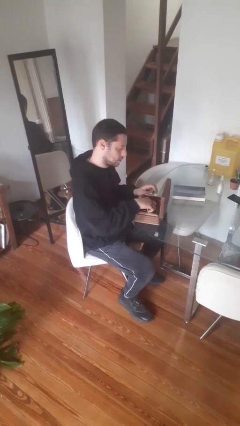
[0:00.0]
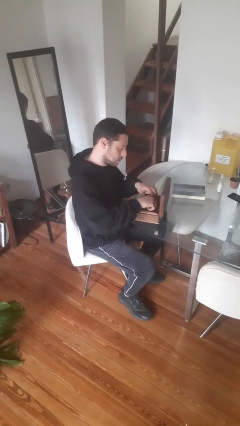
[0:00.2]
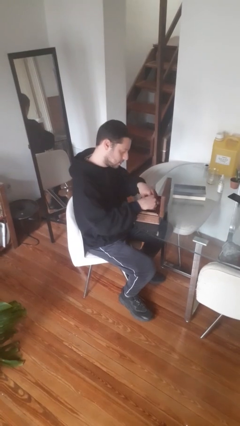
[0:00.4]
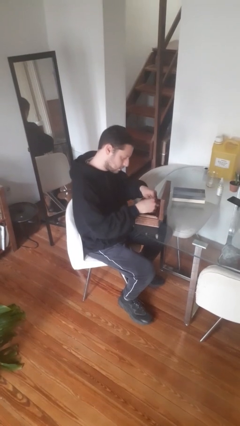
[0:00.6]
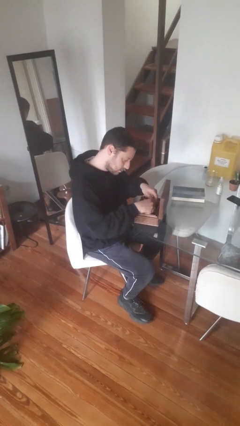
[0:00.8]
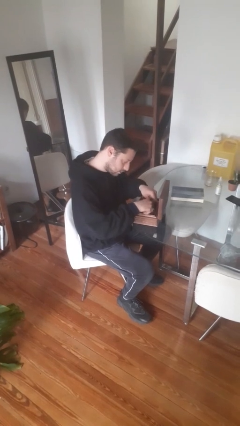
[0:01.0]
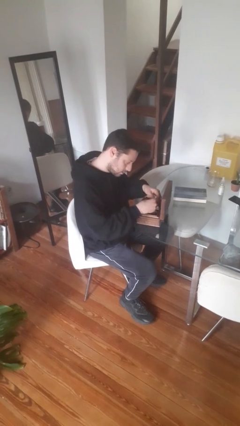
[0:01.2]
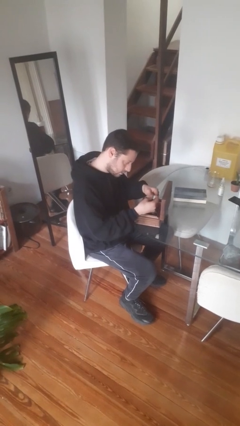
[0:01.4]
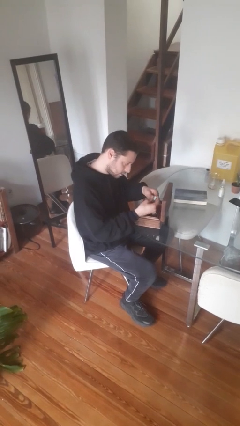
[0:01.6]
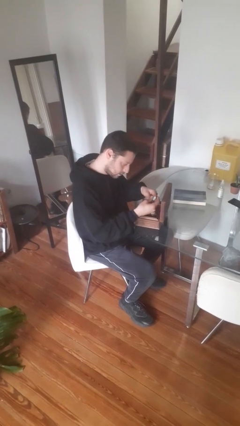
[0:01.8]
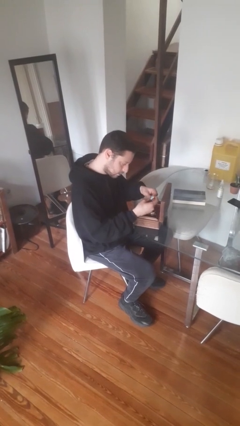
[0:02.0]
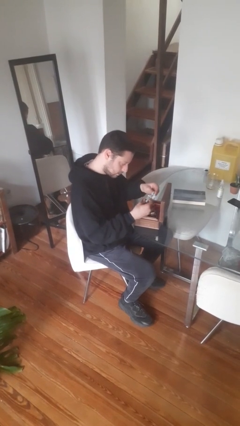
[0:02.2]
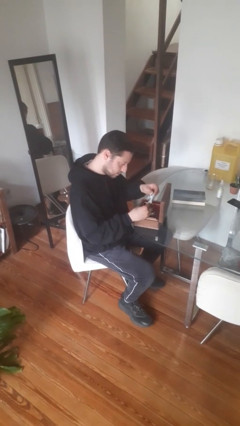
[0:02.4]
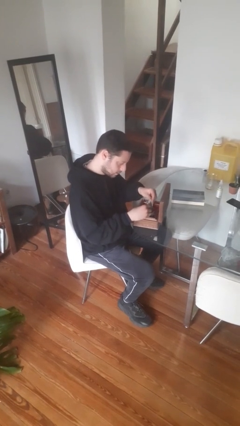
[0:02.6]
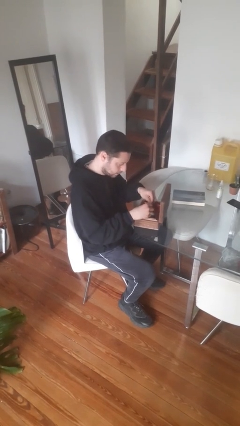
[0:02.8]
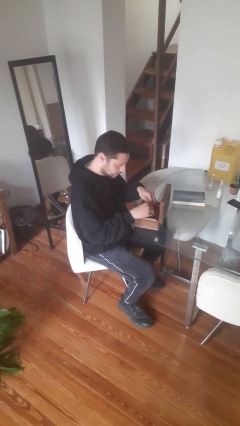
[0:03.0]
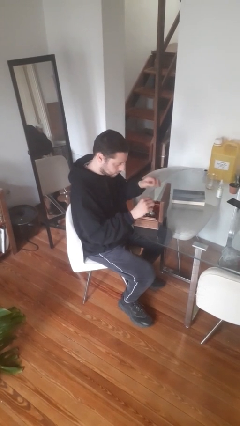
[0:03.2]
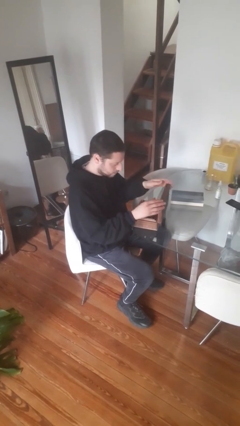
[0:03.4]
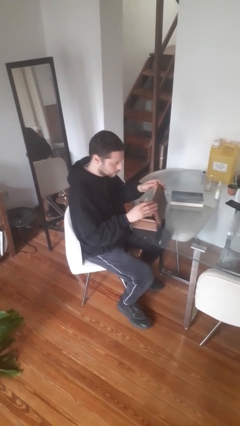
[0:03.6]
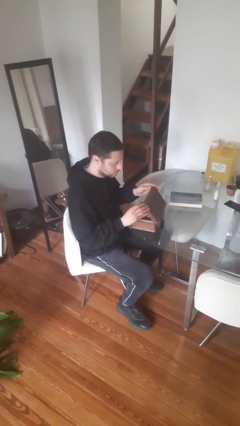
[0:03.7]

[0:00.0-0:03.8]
person searches jewelry box

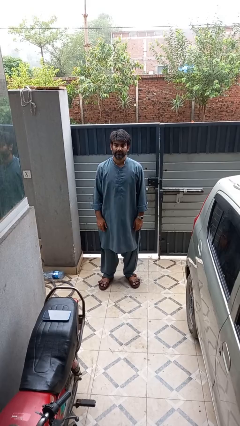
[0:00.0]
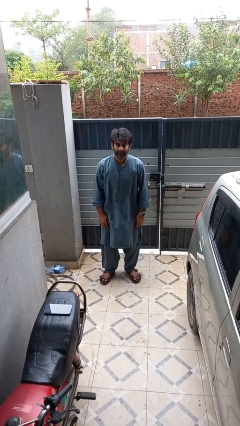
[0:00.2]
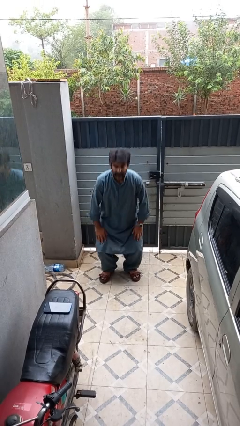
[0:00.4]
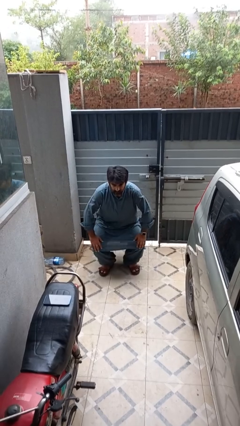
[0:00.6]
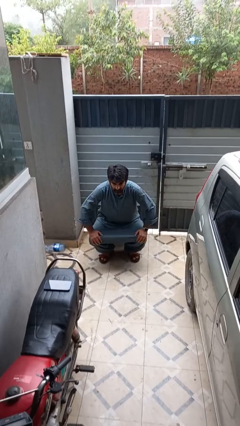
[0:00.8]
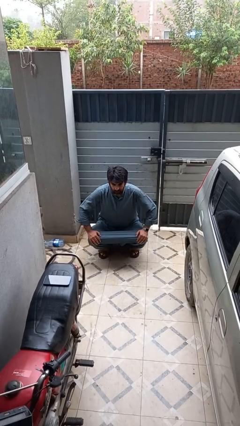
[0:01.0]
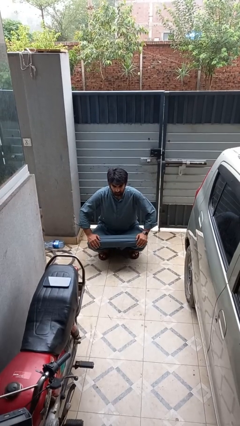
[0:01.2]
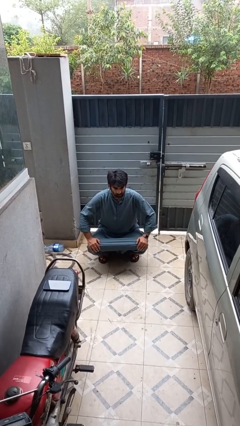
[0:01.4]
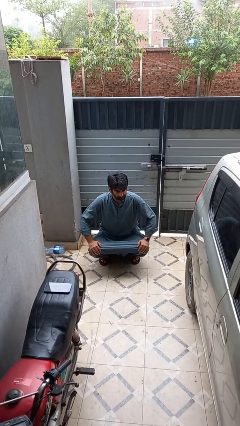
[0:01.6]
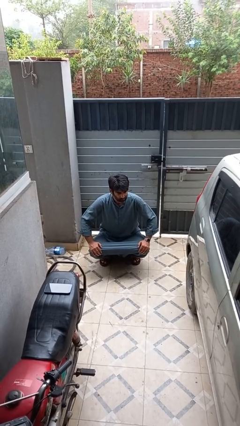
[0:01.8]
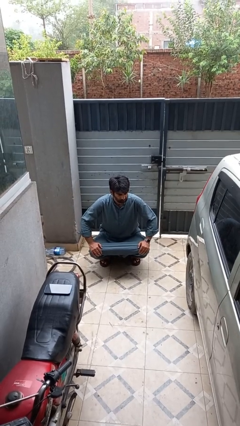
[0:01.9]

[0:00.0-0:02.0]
person squats

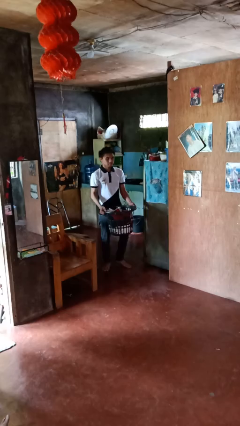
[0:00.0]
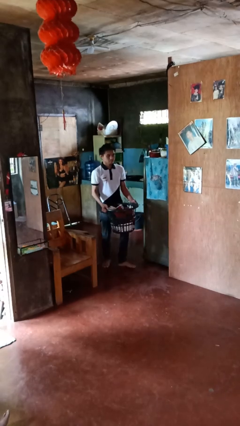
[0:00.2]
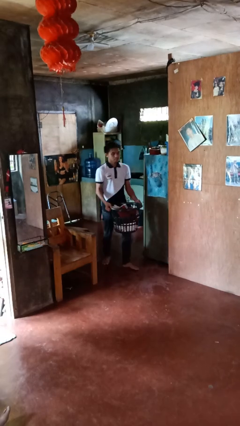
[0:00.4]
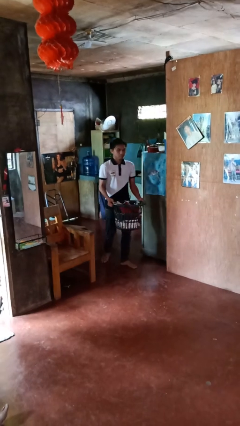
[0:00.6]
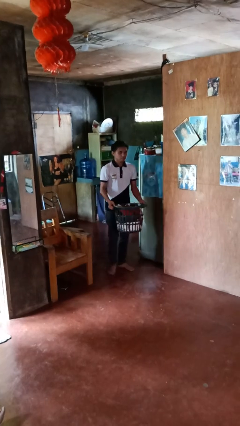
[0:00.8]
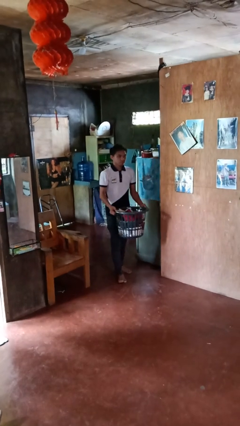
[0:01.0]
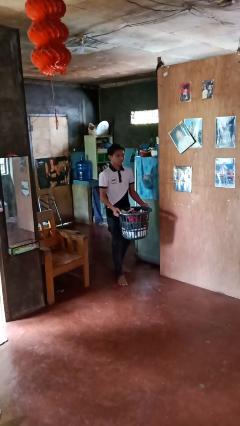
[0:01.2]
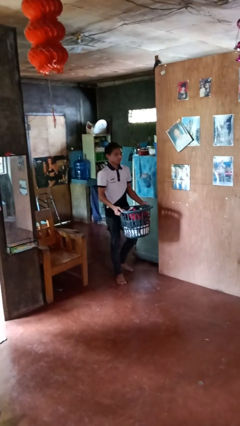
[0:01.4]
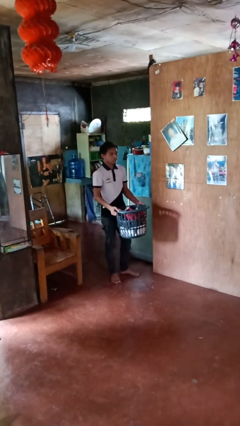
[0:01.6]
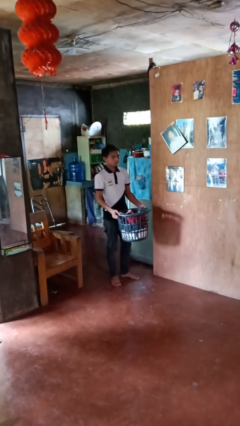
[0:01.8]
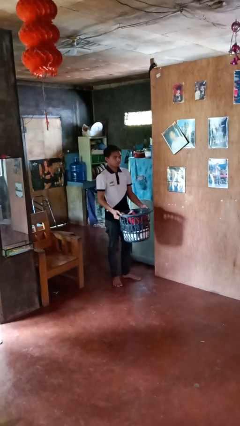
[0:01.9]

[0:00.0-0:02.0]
person carries laundry basket

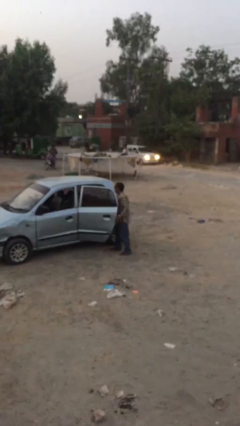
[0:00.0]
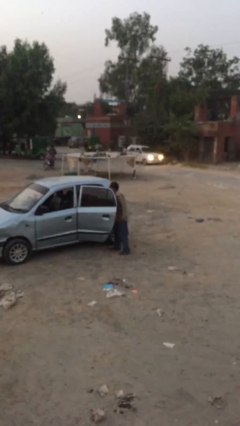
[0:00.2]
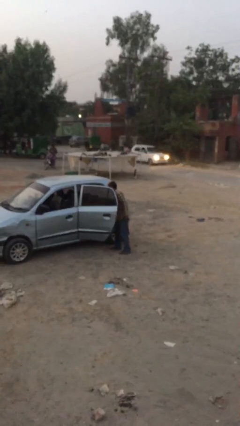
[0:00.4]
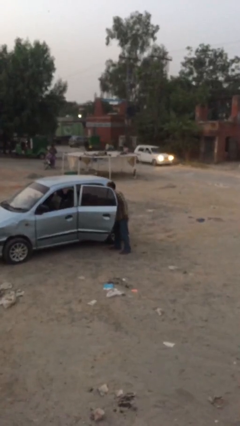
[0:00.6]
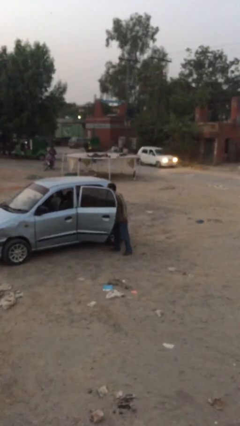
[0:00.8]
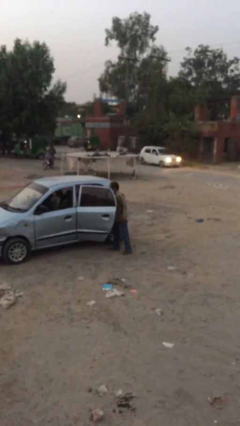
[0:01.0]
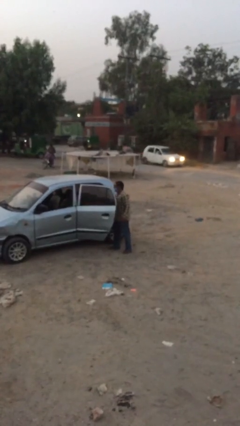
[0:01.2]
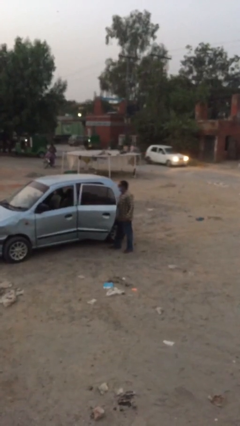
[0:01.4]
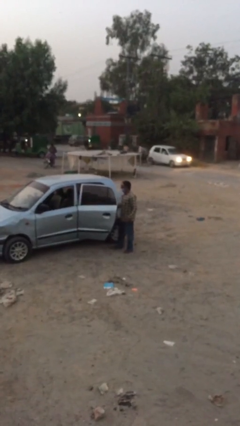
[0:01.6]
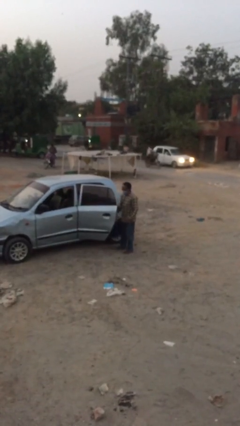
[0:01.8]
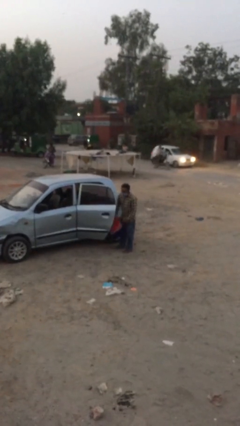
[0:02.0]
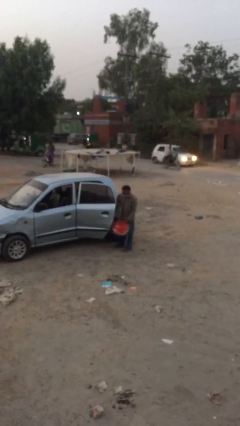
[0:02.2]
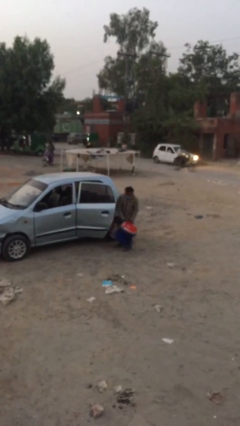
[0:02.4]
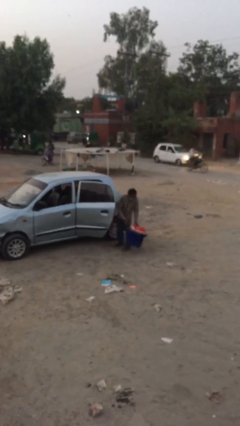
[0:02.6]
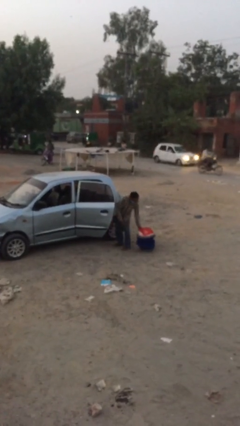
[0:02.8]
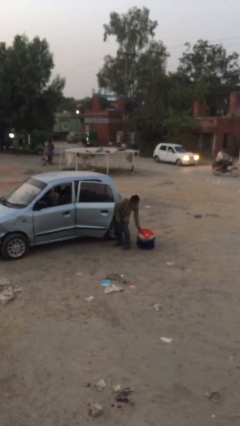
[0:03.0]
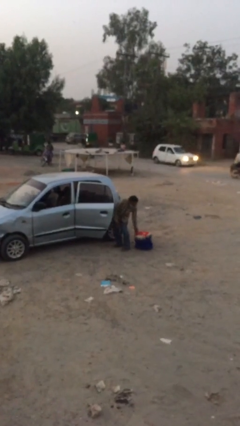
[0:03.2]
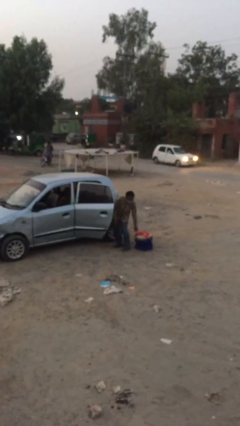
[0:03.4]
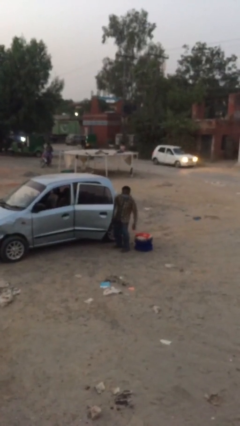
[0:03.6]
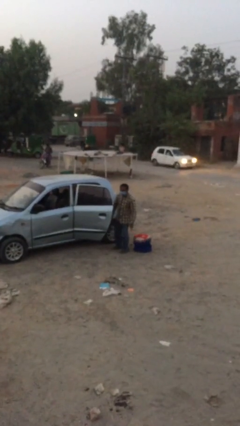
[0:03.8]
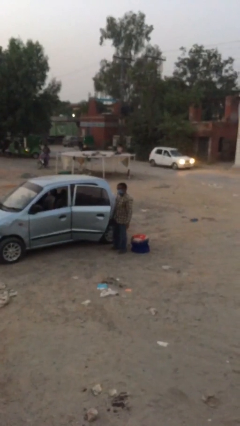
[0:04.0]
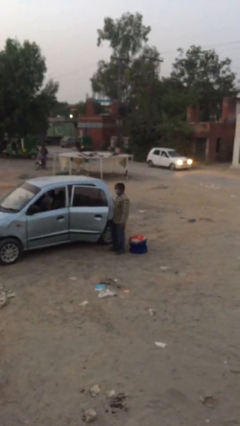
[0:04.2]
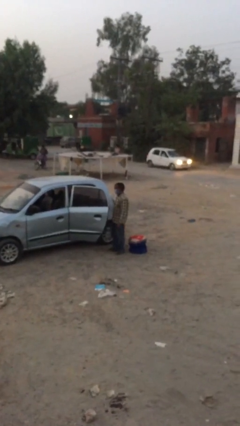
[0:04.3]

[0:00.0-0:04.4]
person unloads car

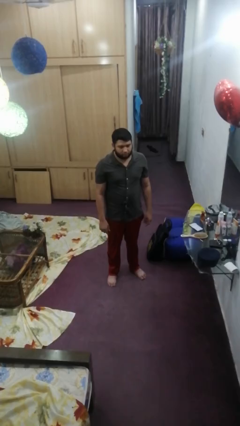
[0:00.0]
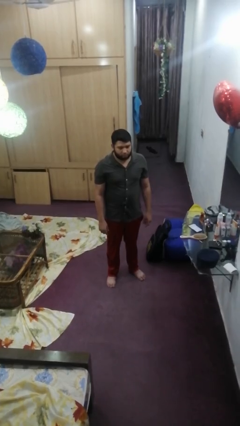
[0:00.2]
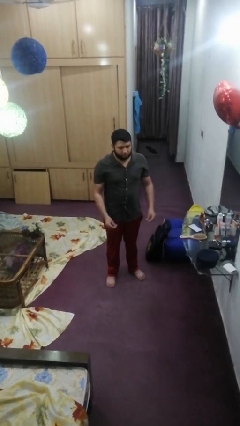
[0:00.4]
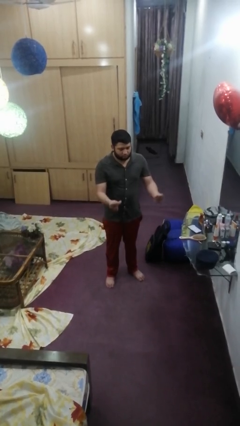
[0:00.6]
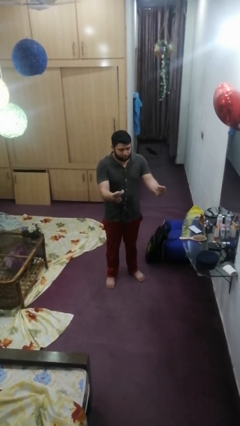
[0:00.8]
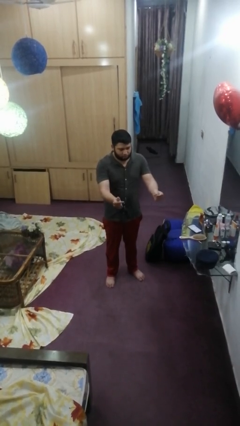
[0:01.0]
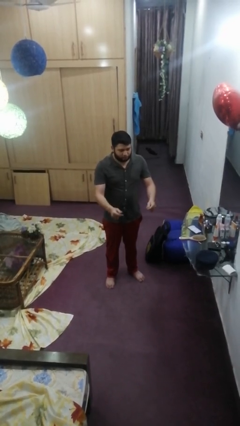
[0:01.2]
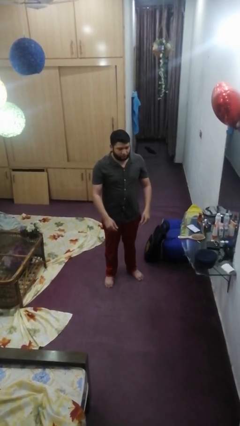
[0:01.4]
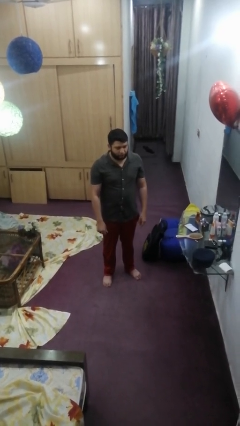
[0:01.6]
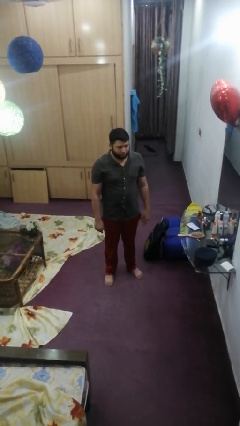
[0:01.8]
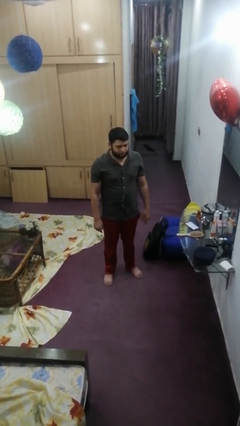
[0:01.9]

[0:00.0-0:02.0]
person snaps fingers

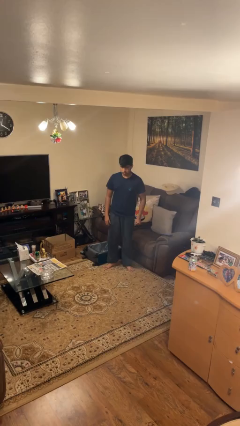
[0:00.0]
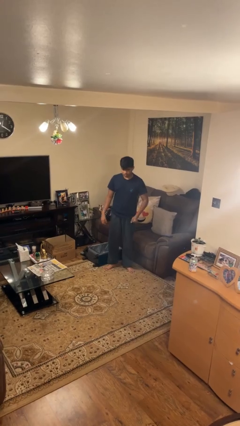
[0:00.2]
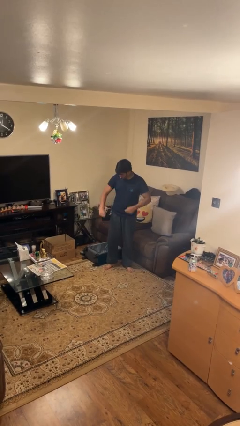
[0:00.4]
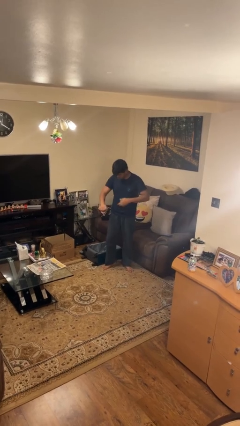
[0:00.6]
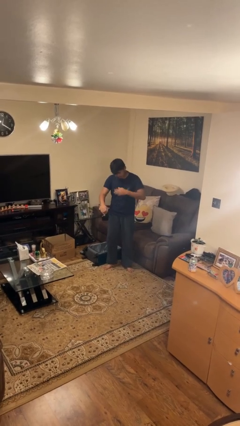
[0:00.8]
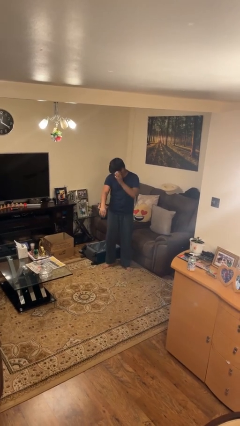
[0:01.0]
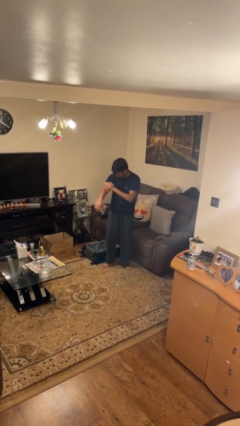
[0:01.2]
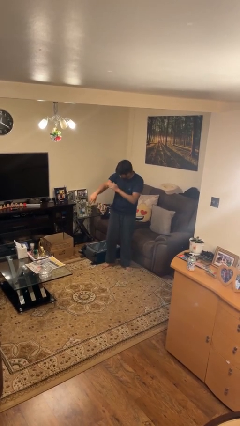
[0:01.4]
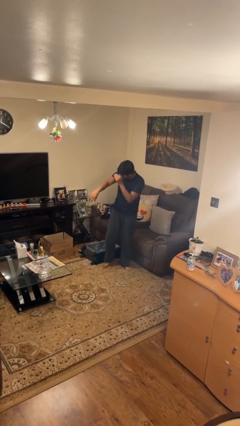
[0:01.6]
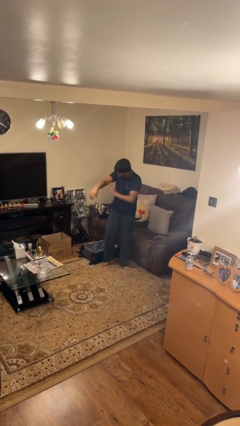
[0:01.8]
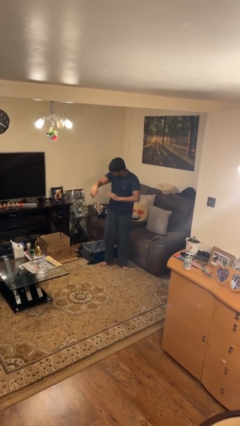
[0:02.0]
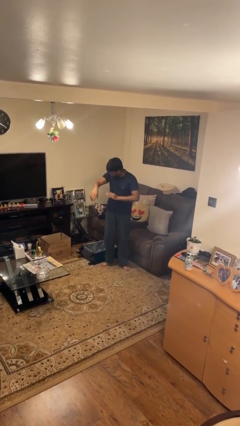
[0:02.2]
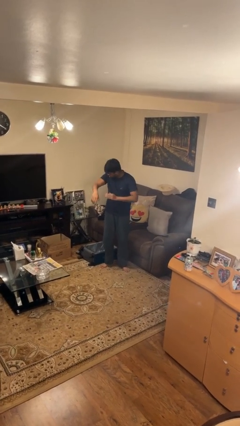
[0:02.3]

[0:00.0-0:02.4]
person swats bug

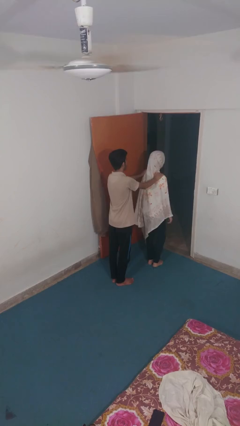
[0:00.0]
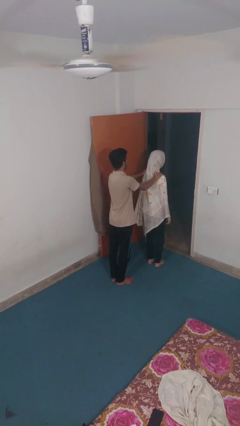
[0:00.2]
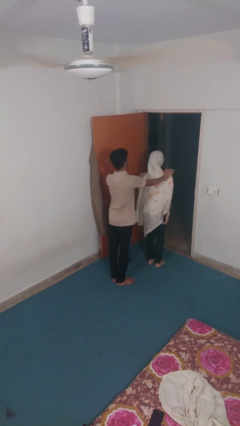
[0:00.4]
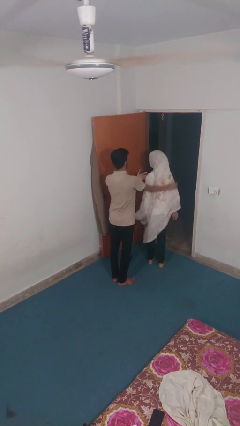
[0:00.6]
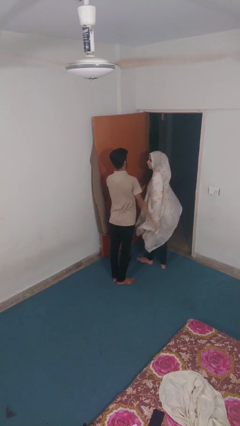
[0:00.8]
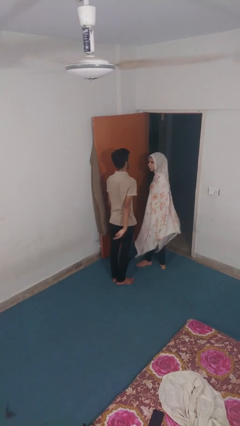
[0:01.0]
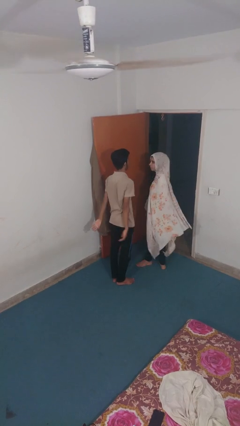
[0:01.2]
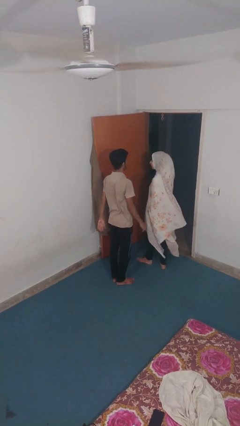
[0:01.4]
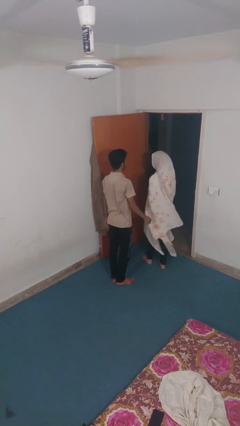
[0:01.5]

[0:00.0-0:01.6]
person spins person around
